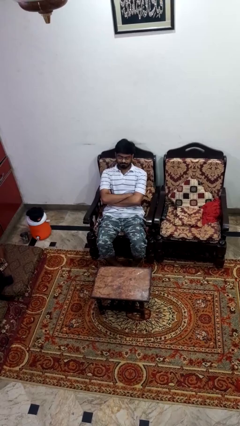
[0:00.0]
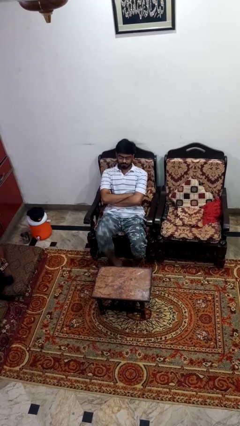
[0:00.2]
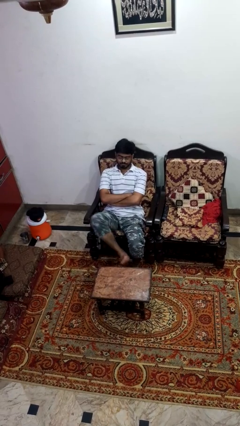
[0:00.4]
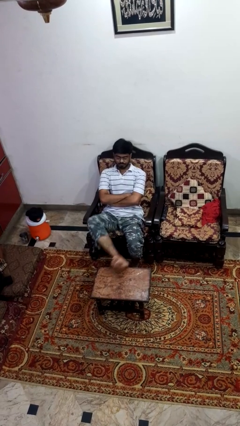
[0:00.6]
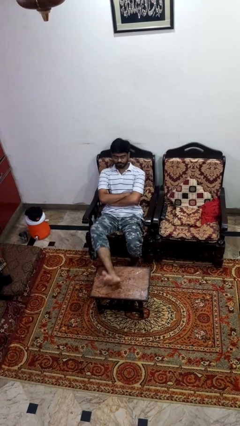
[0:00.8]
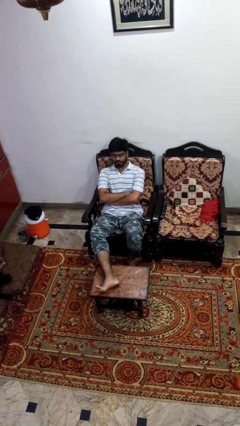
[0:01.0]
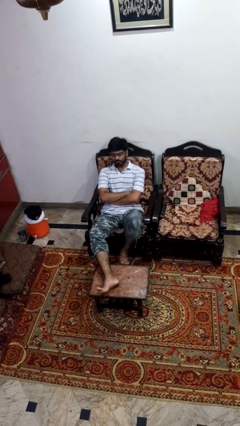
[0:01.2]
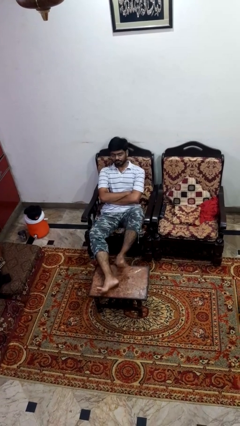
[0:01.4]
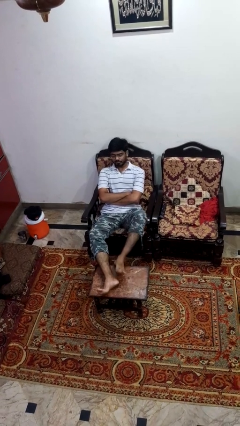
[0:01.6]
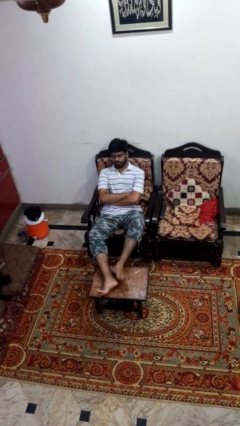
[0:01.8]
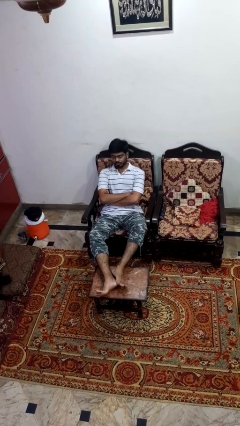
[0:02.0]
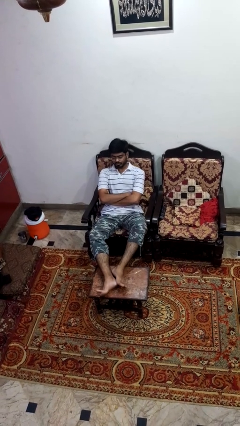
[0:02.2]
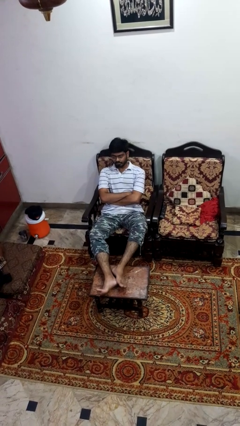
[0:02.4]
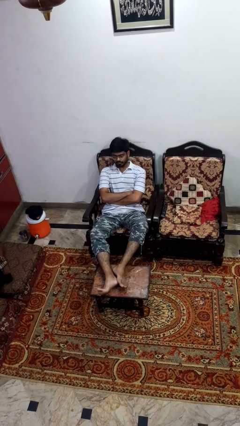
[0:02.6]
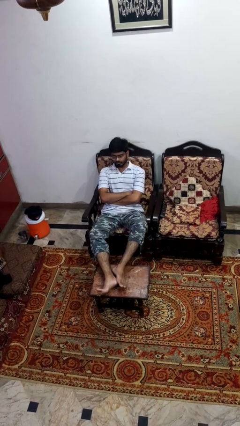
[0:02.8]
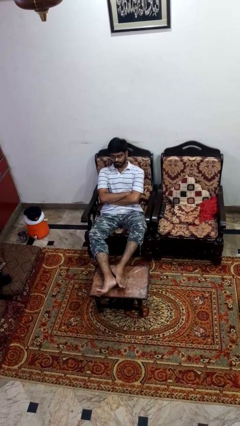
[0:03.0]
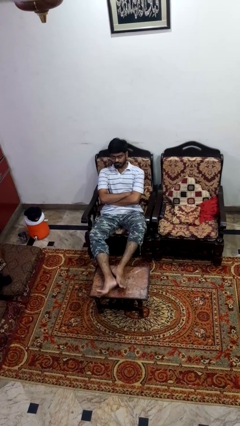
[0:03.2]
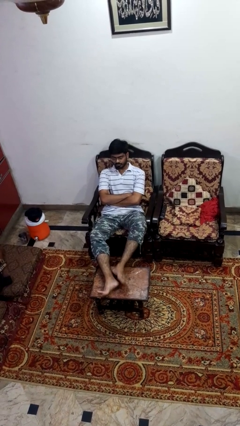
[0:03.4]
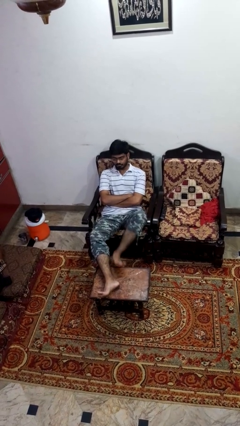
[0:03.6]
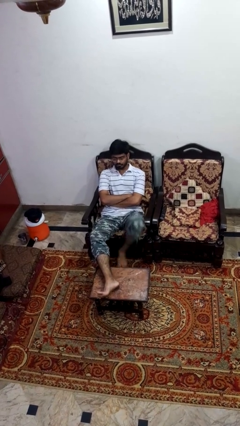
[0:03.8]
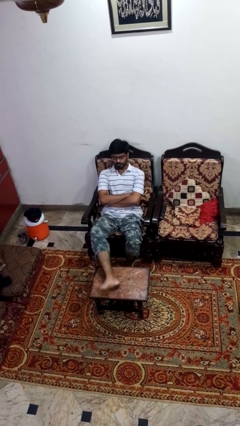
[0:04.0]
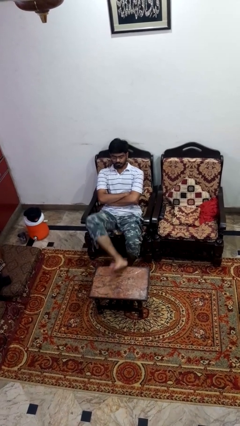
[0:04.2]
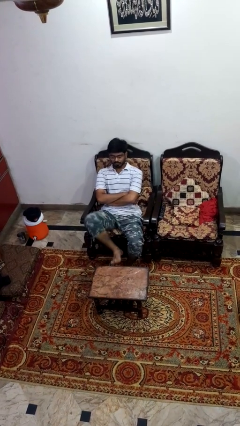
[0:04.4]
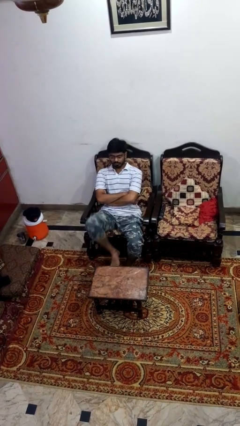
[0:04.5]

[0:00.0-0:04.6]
person puts feet up

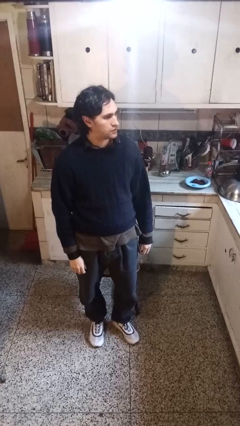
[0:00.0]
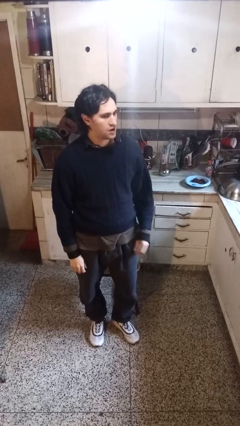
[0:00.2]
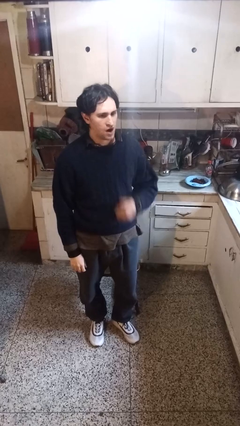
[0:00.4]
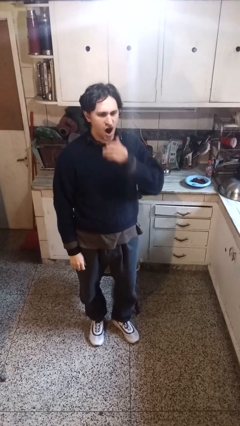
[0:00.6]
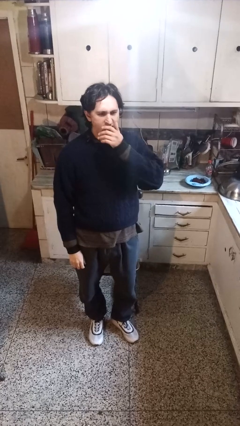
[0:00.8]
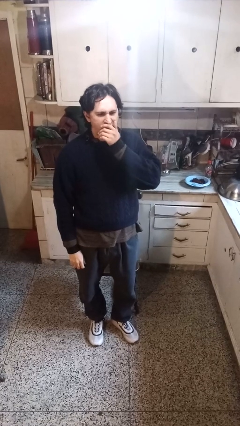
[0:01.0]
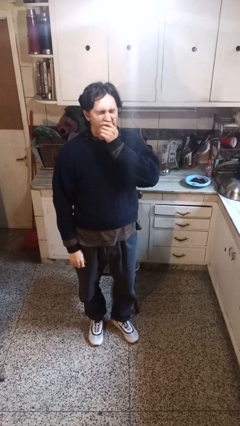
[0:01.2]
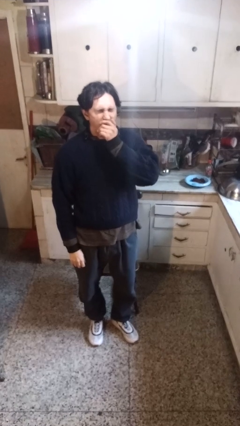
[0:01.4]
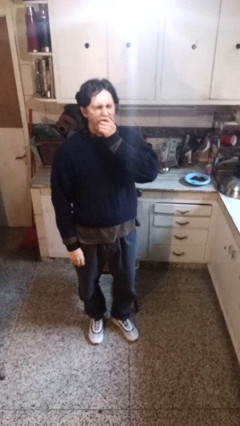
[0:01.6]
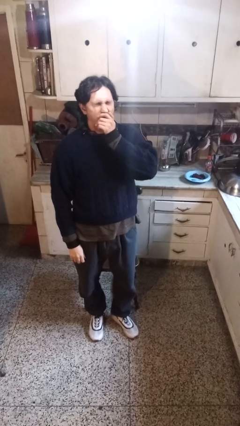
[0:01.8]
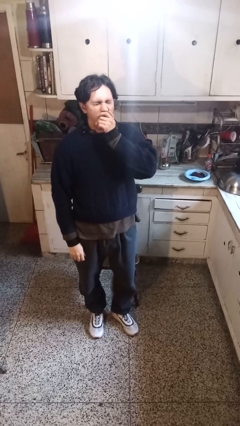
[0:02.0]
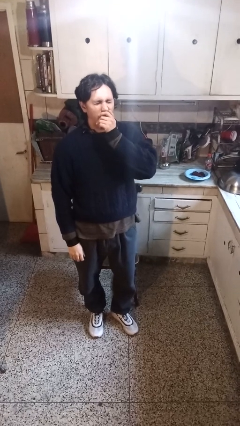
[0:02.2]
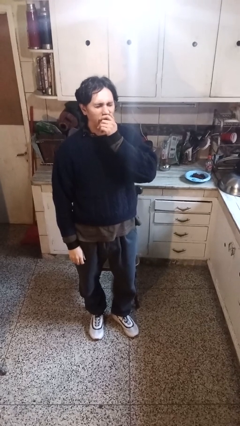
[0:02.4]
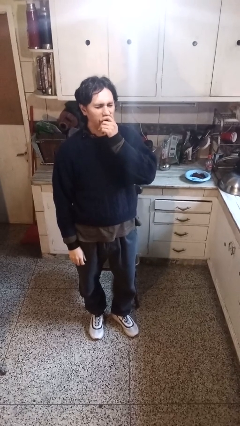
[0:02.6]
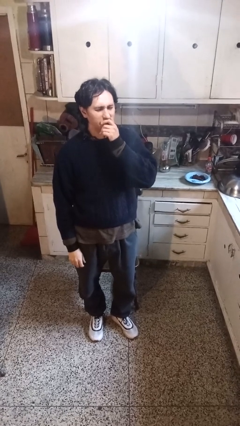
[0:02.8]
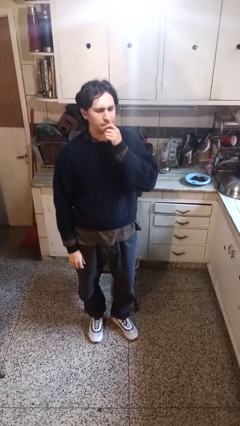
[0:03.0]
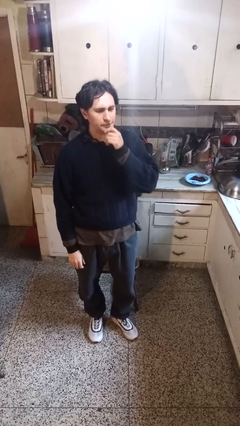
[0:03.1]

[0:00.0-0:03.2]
person yawns

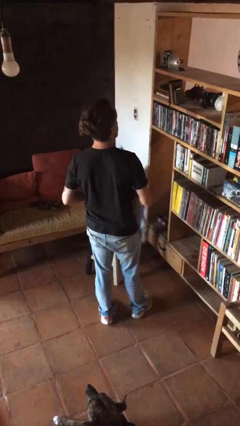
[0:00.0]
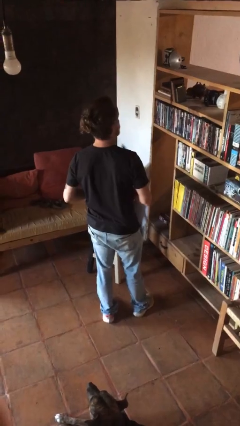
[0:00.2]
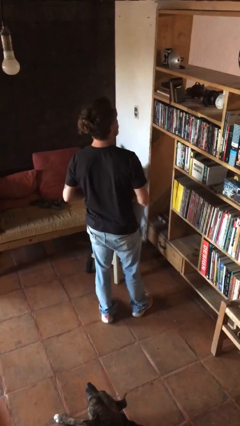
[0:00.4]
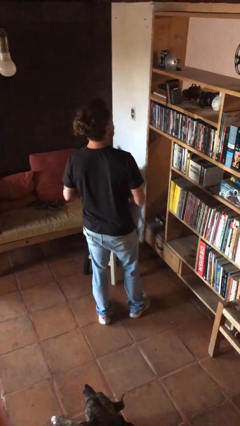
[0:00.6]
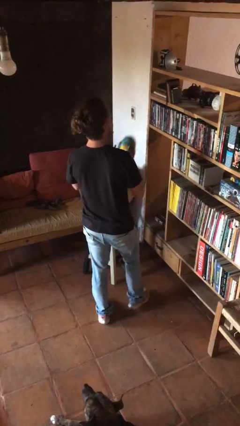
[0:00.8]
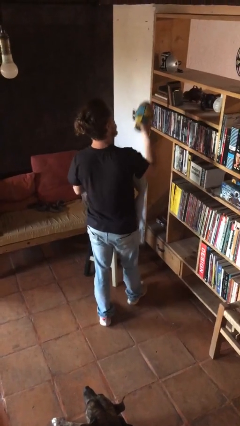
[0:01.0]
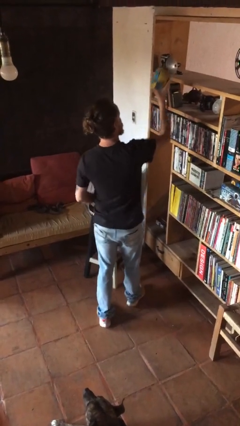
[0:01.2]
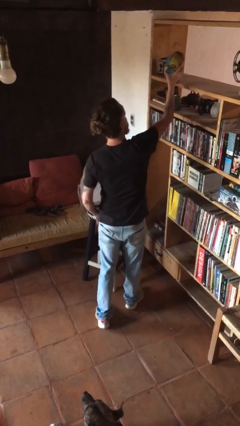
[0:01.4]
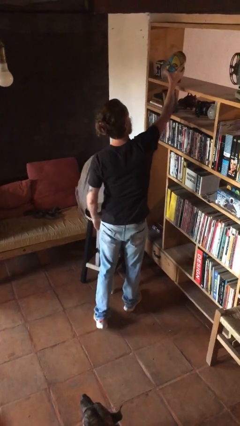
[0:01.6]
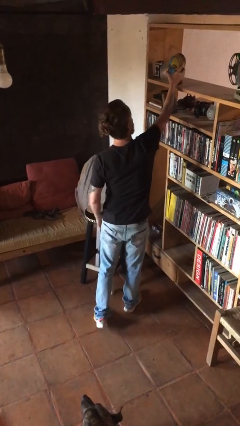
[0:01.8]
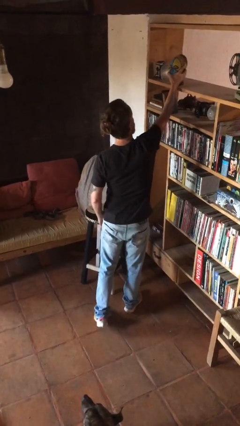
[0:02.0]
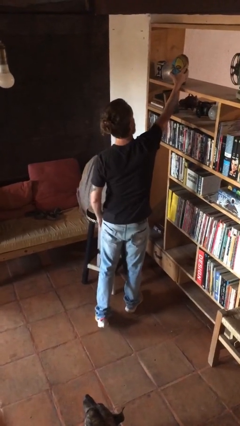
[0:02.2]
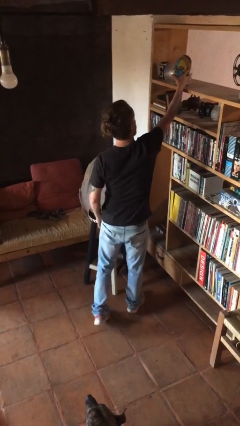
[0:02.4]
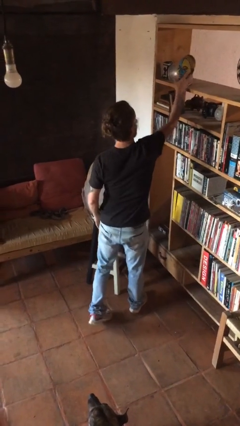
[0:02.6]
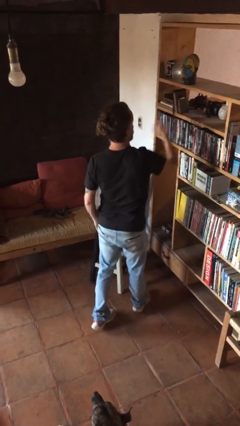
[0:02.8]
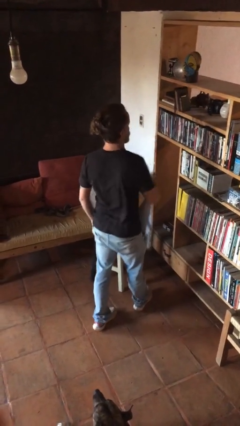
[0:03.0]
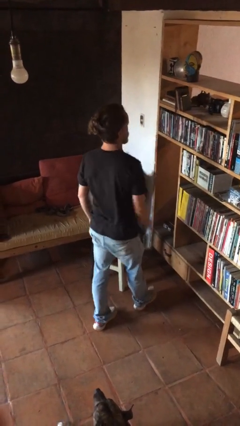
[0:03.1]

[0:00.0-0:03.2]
person puts down object on countertop

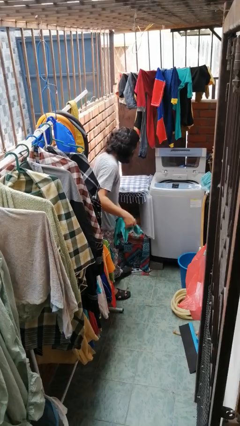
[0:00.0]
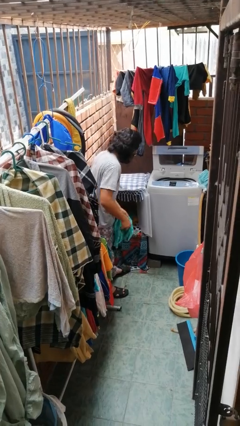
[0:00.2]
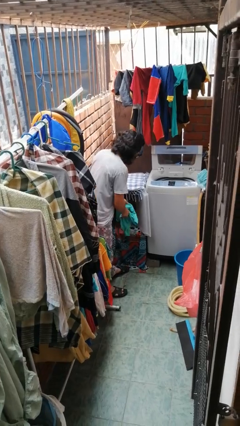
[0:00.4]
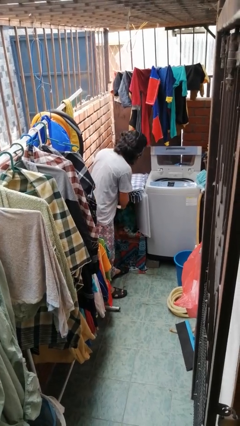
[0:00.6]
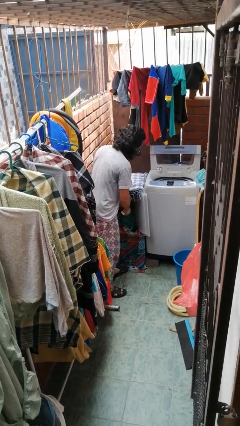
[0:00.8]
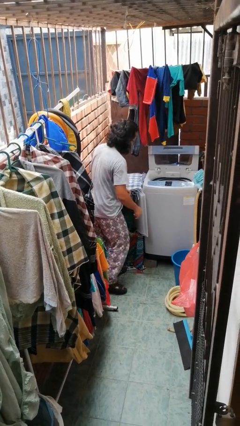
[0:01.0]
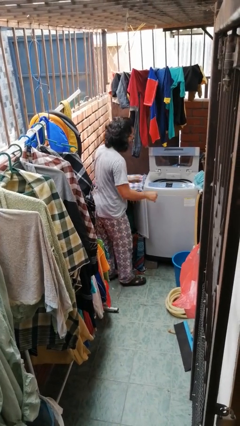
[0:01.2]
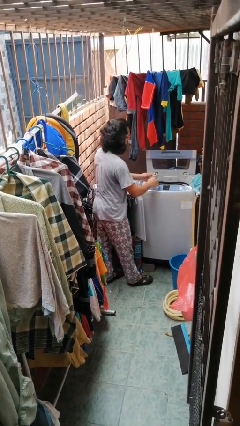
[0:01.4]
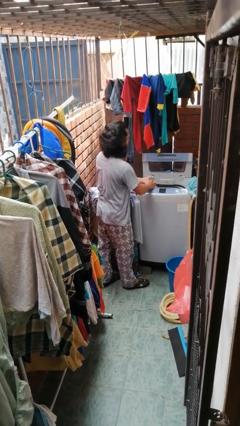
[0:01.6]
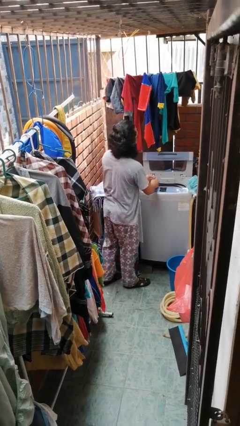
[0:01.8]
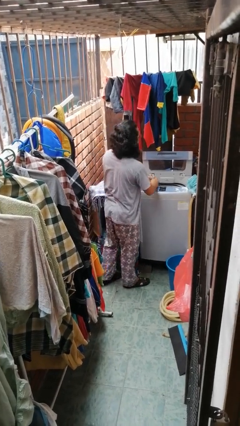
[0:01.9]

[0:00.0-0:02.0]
person loads dryer

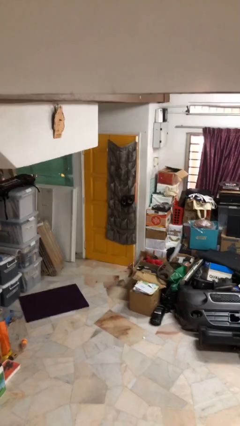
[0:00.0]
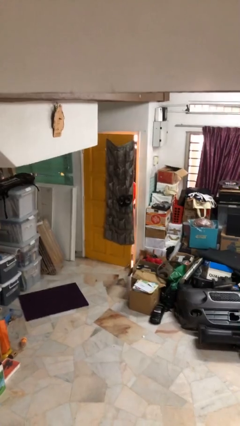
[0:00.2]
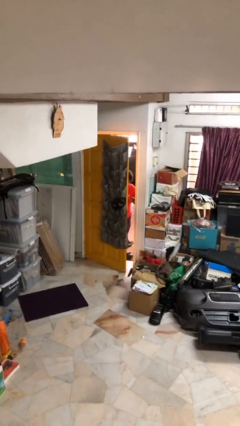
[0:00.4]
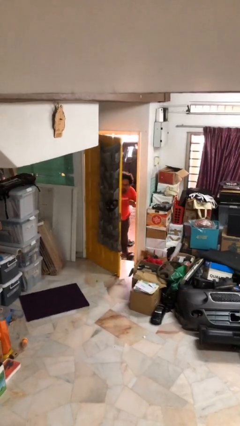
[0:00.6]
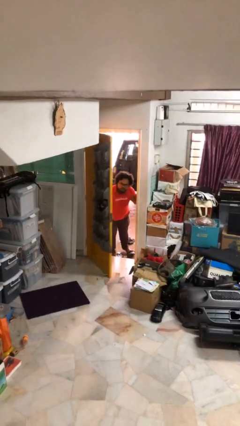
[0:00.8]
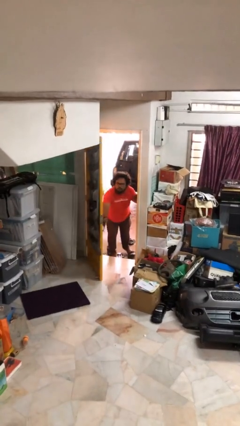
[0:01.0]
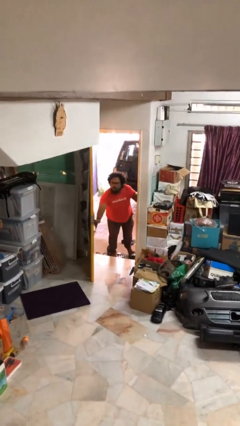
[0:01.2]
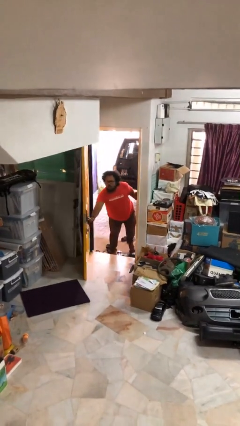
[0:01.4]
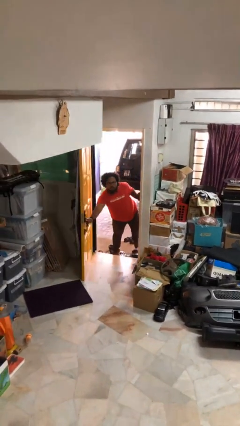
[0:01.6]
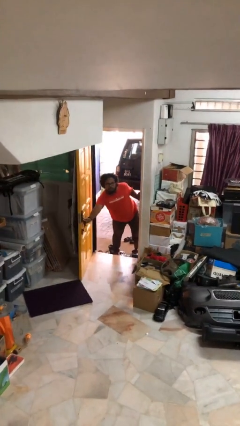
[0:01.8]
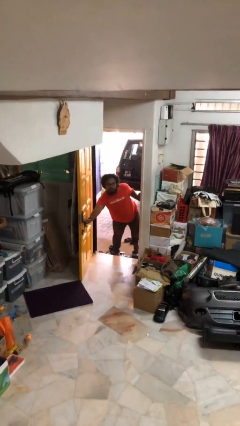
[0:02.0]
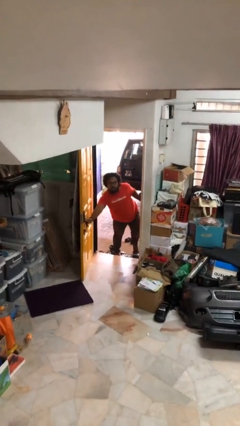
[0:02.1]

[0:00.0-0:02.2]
person opens facility door

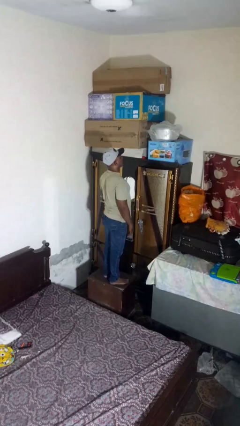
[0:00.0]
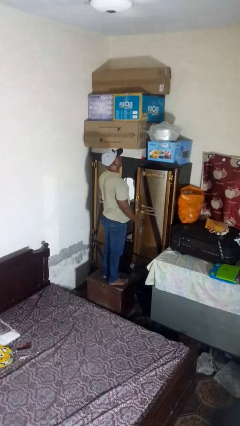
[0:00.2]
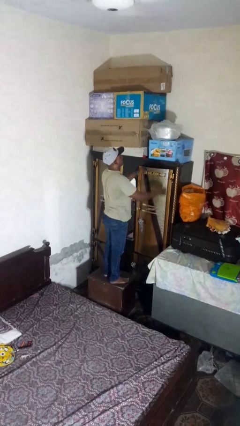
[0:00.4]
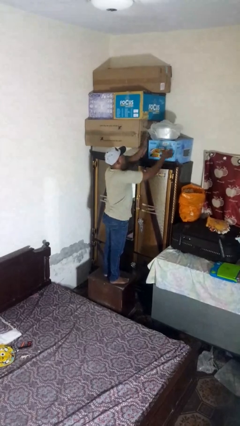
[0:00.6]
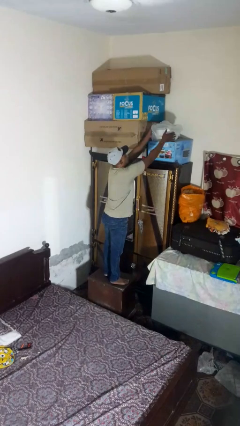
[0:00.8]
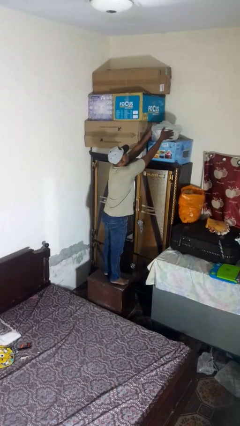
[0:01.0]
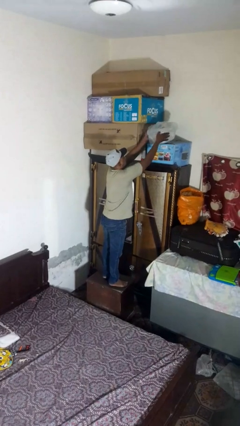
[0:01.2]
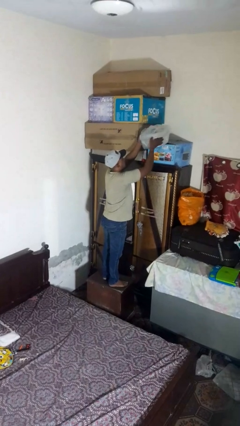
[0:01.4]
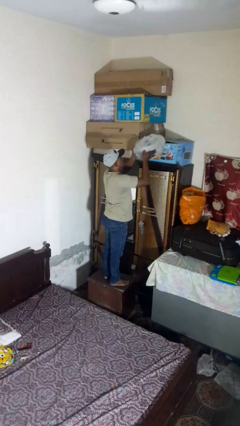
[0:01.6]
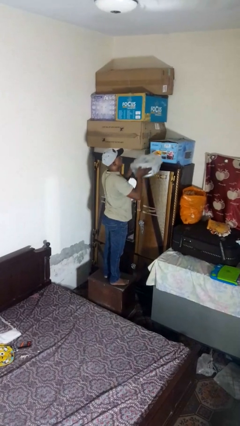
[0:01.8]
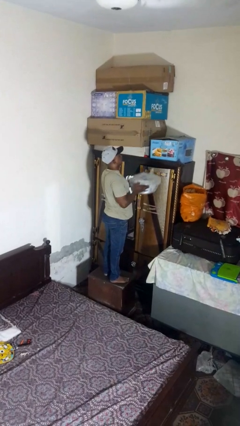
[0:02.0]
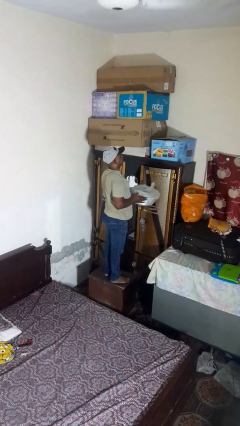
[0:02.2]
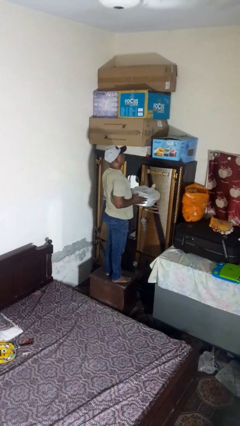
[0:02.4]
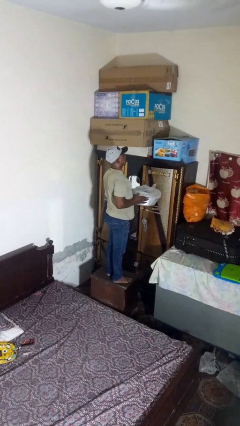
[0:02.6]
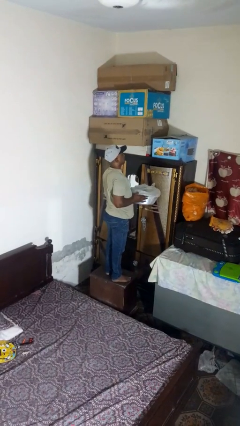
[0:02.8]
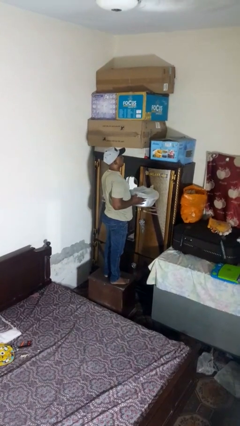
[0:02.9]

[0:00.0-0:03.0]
person puts down object on shelf
